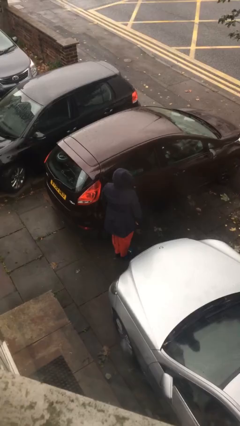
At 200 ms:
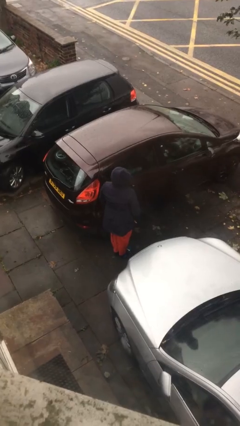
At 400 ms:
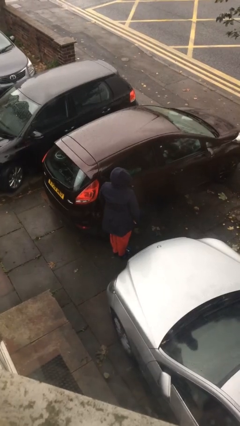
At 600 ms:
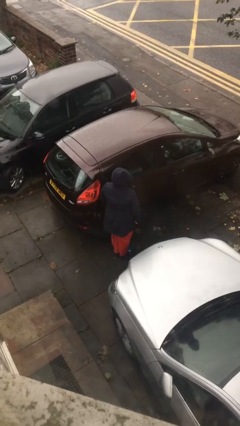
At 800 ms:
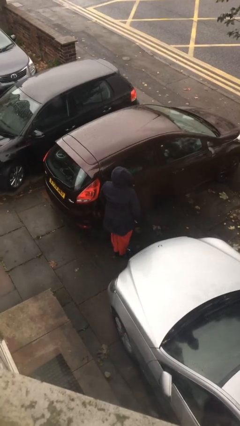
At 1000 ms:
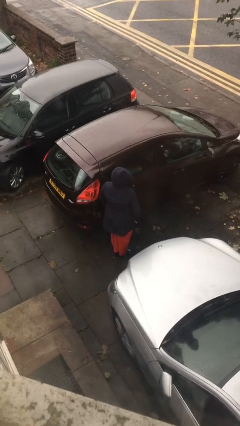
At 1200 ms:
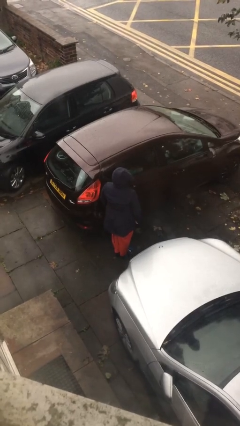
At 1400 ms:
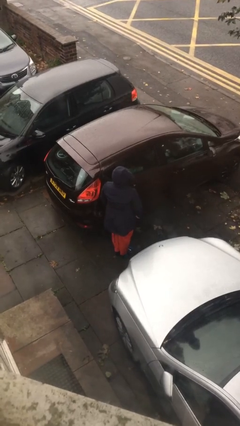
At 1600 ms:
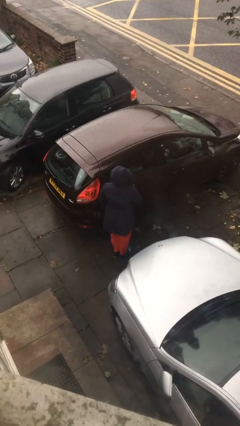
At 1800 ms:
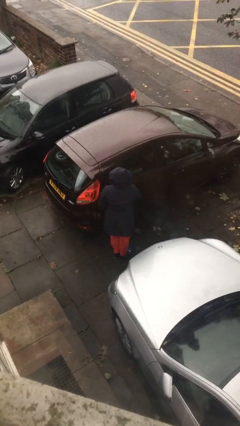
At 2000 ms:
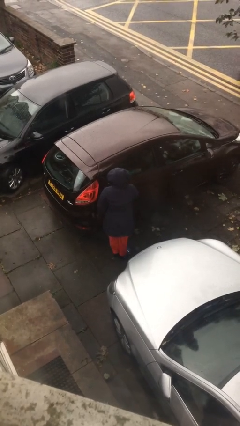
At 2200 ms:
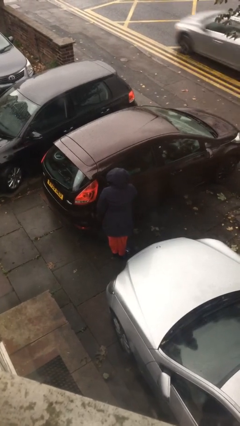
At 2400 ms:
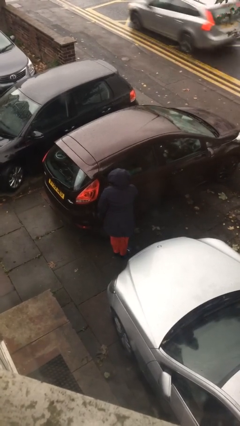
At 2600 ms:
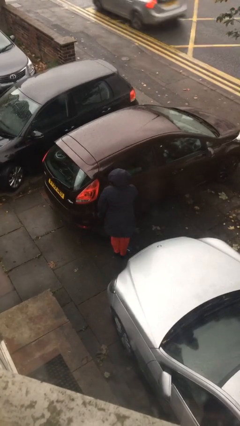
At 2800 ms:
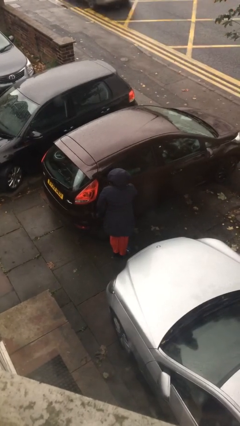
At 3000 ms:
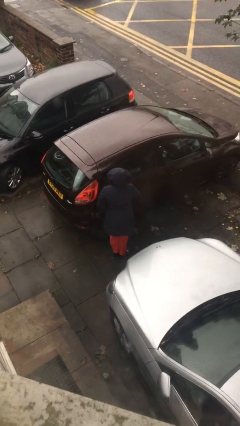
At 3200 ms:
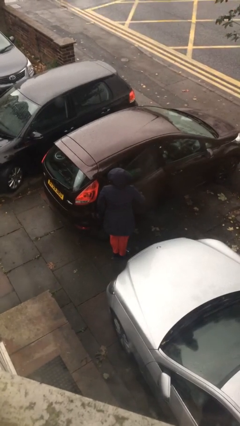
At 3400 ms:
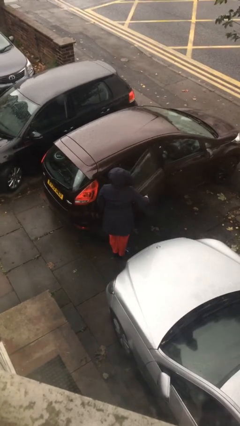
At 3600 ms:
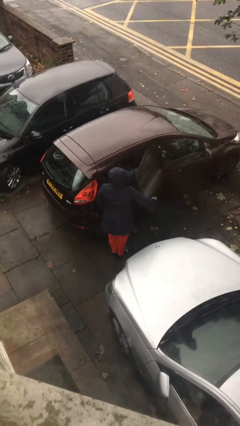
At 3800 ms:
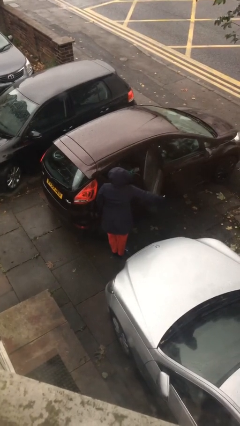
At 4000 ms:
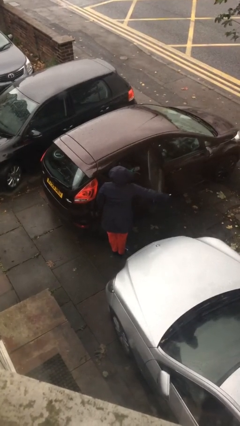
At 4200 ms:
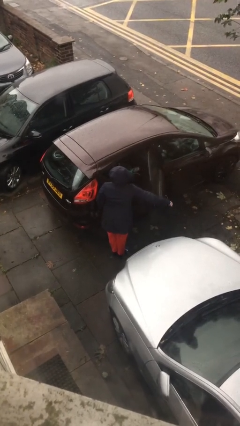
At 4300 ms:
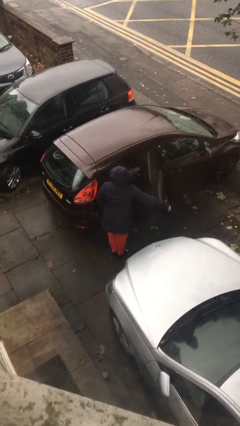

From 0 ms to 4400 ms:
person opens car door

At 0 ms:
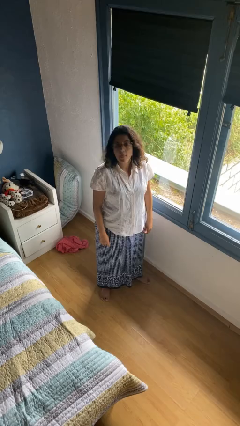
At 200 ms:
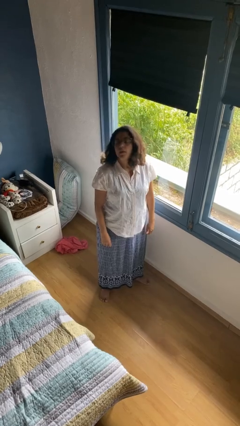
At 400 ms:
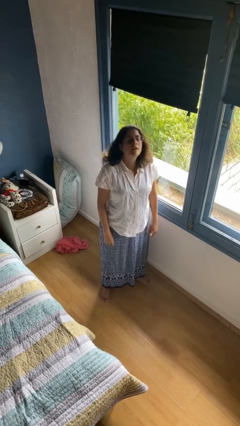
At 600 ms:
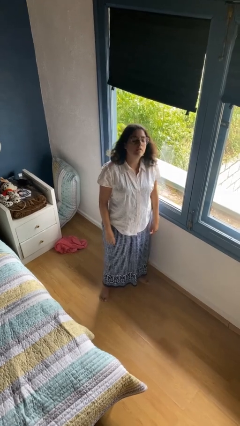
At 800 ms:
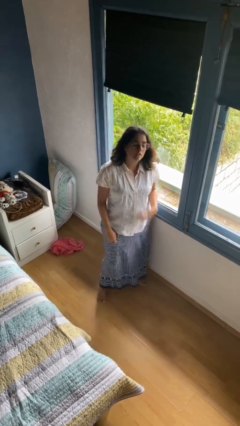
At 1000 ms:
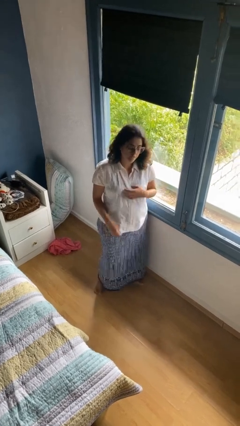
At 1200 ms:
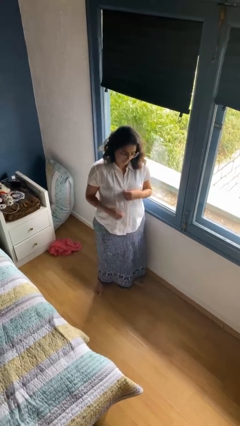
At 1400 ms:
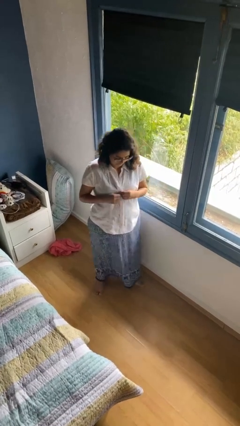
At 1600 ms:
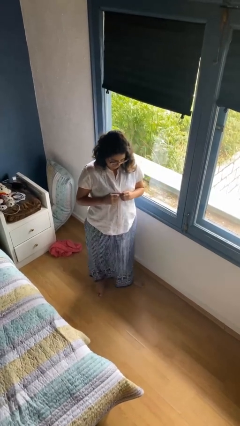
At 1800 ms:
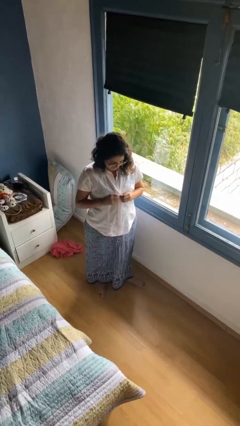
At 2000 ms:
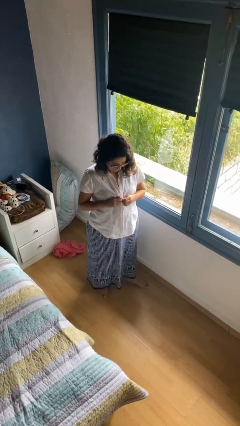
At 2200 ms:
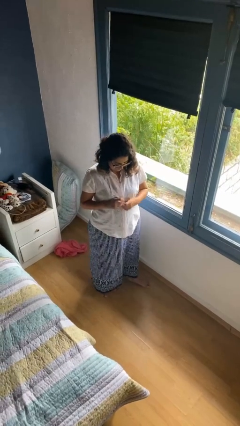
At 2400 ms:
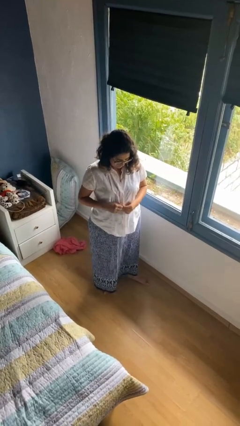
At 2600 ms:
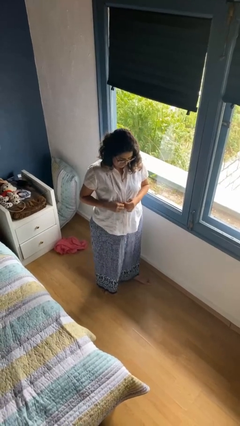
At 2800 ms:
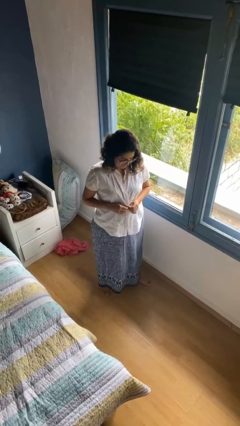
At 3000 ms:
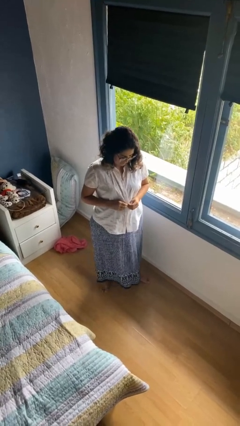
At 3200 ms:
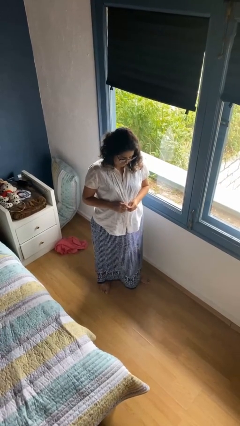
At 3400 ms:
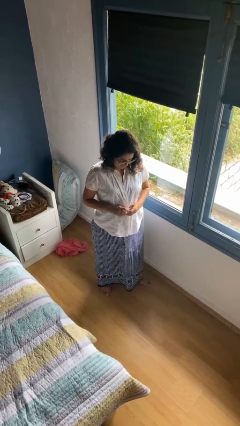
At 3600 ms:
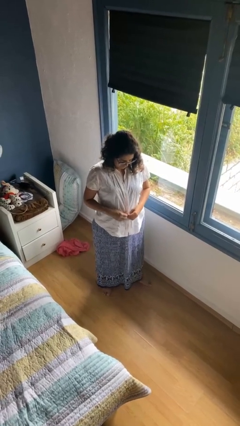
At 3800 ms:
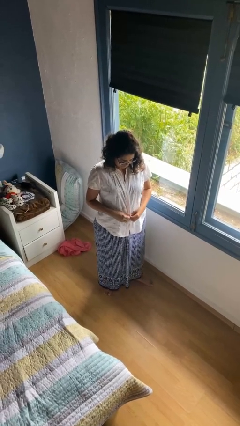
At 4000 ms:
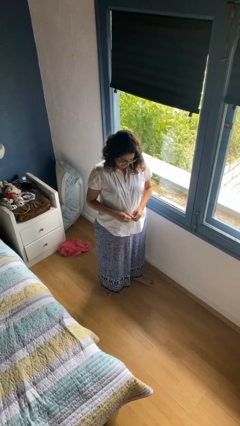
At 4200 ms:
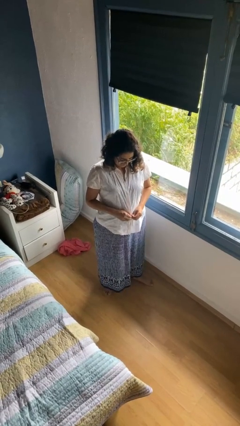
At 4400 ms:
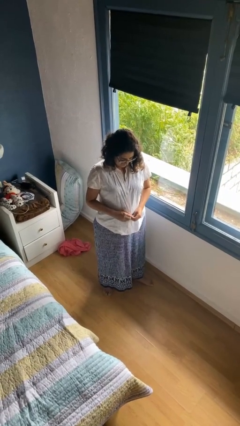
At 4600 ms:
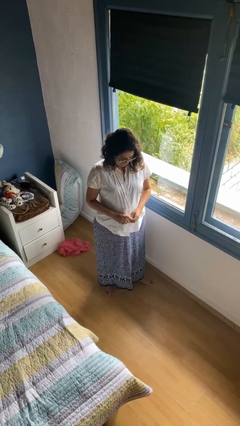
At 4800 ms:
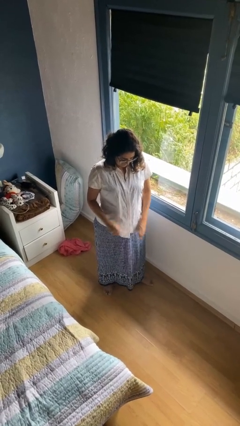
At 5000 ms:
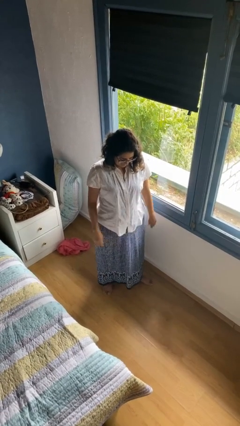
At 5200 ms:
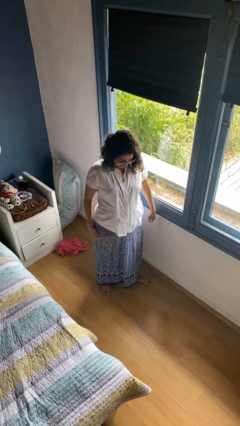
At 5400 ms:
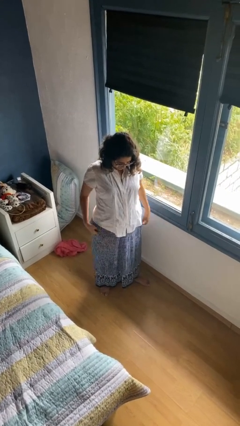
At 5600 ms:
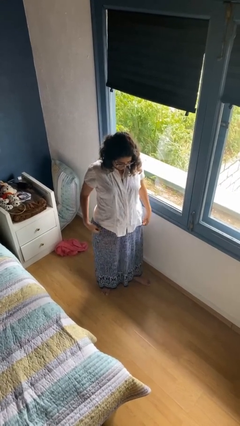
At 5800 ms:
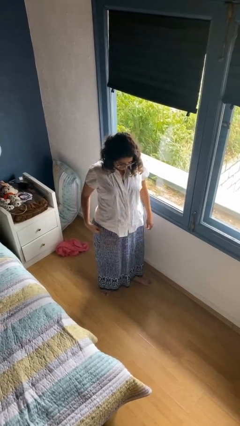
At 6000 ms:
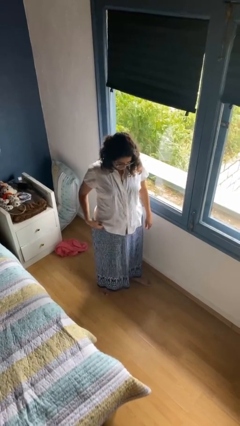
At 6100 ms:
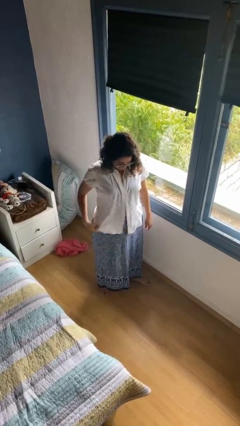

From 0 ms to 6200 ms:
person unbuttons shirt

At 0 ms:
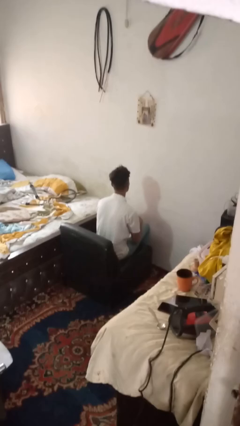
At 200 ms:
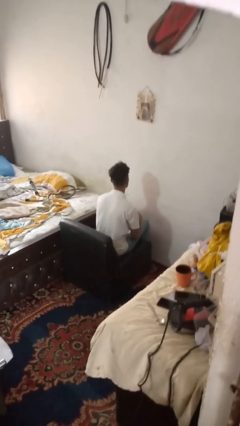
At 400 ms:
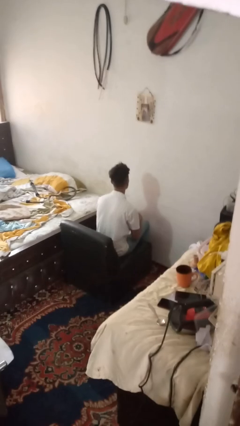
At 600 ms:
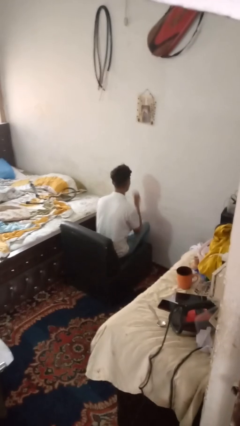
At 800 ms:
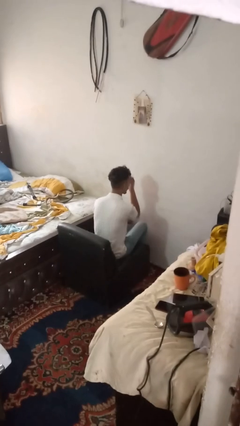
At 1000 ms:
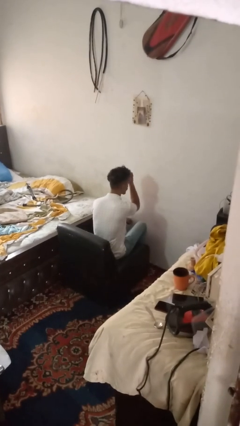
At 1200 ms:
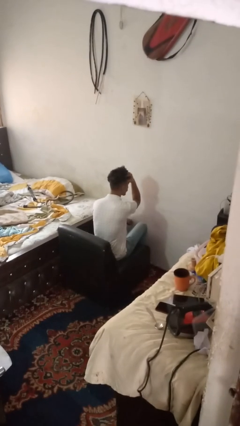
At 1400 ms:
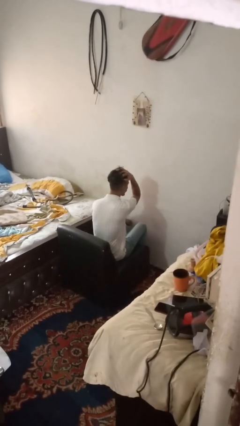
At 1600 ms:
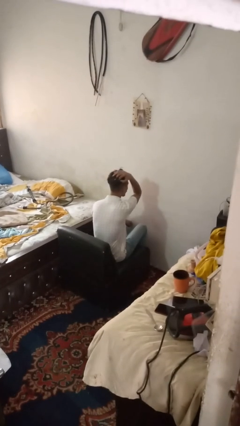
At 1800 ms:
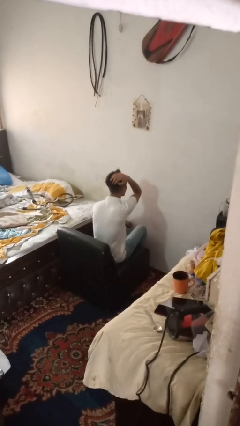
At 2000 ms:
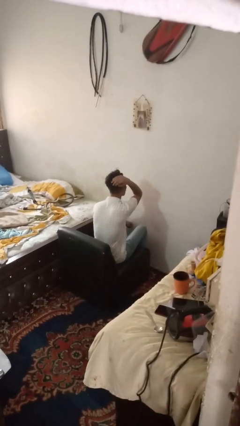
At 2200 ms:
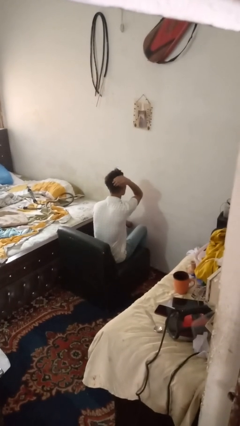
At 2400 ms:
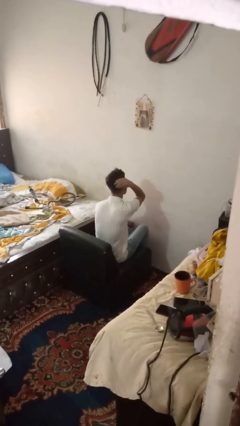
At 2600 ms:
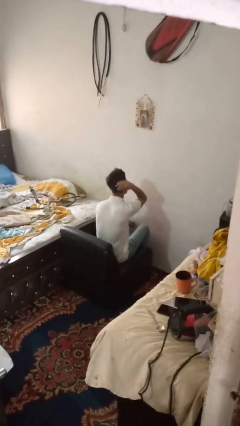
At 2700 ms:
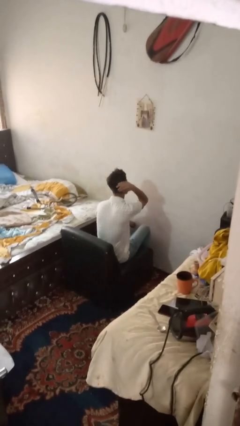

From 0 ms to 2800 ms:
person strokes hair

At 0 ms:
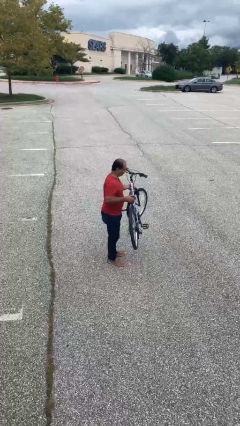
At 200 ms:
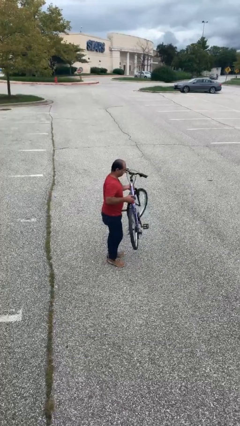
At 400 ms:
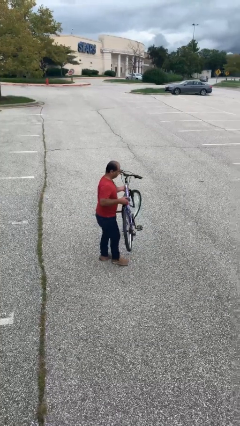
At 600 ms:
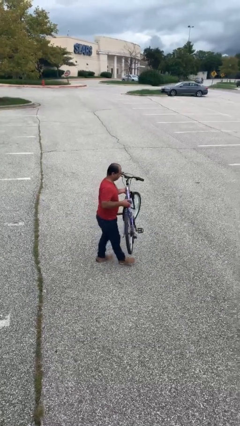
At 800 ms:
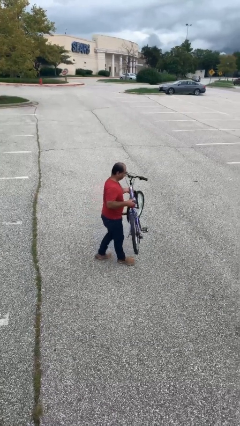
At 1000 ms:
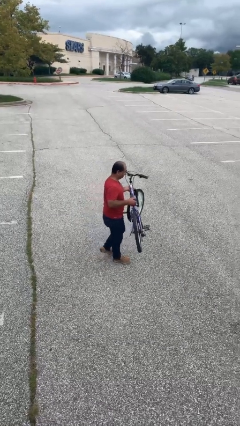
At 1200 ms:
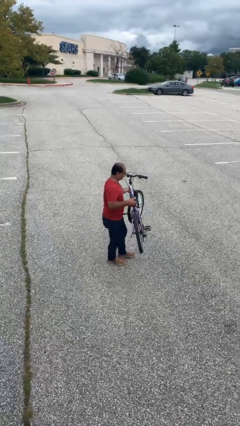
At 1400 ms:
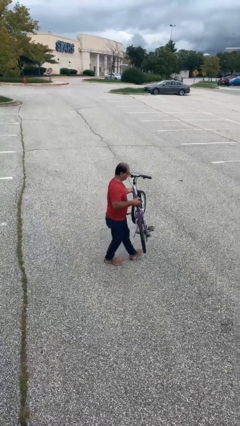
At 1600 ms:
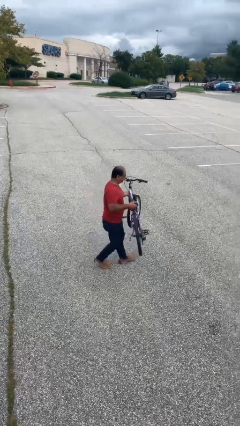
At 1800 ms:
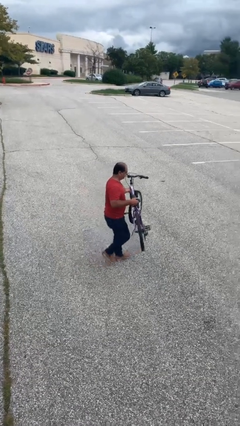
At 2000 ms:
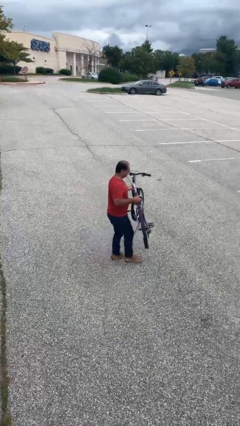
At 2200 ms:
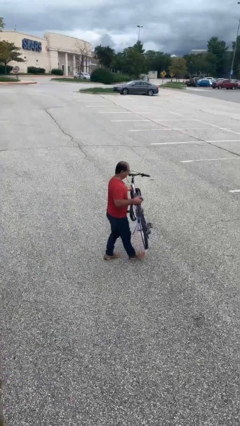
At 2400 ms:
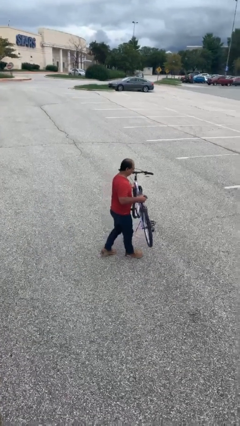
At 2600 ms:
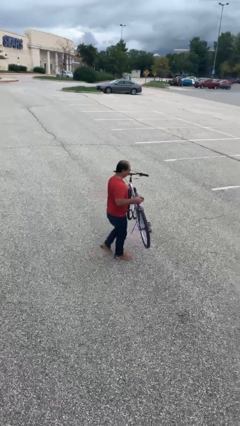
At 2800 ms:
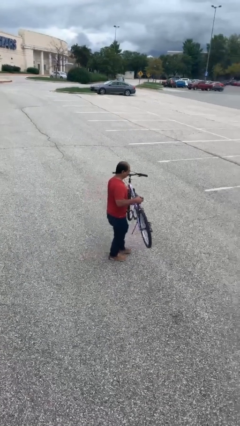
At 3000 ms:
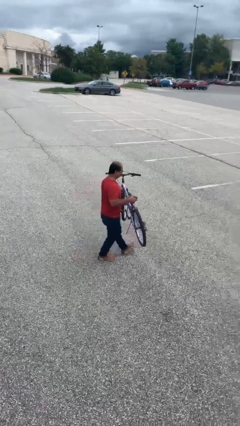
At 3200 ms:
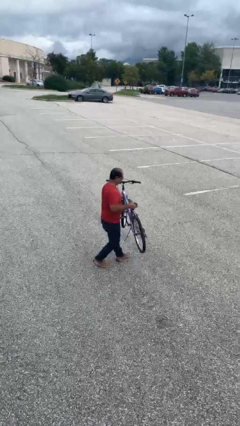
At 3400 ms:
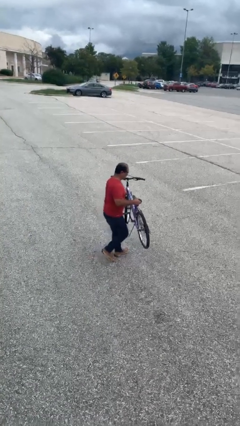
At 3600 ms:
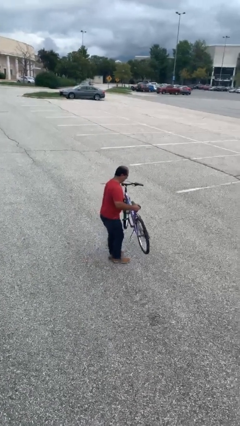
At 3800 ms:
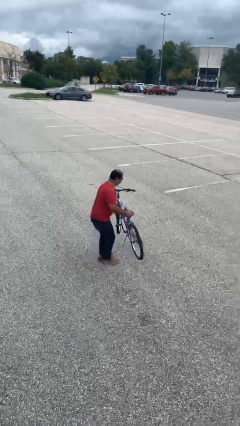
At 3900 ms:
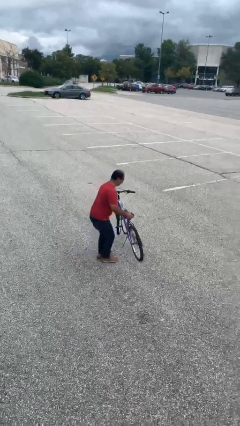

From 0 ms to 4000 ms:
person carries heavy object

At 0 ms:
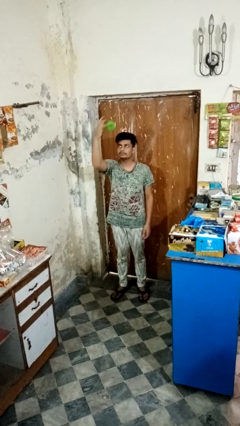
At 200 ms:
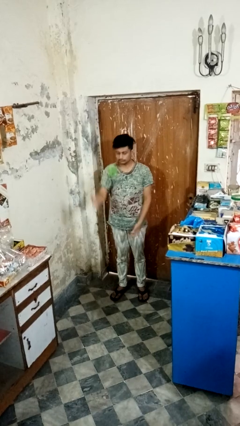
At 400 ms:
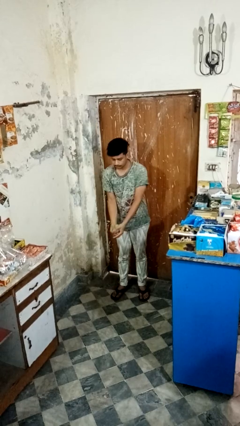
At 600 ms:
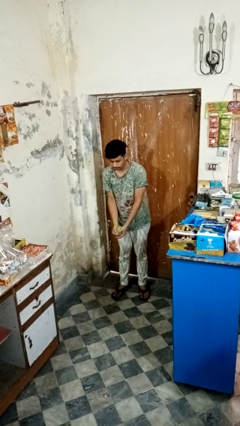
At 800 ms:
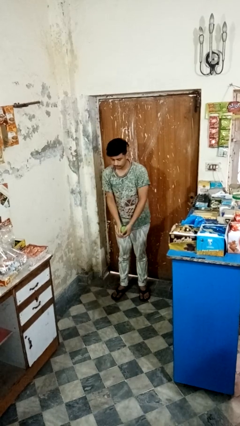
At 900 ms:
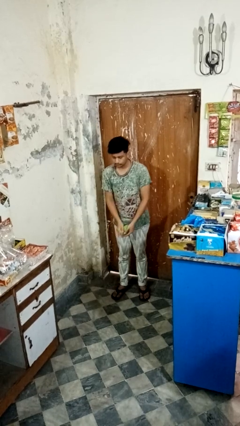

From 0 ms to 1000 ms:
person catches dropped object
